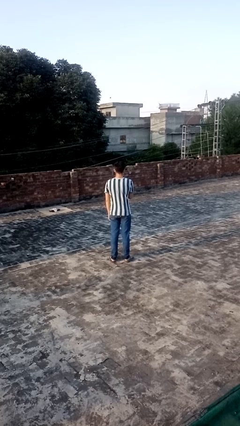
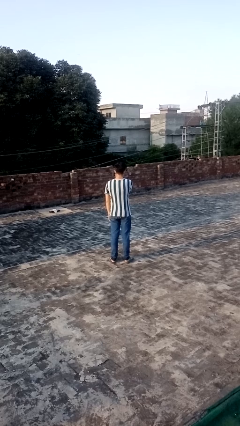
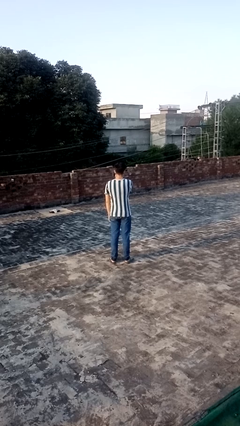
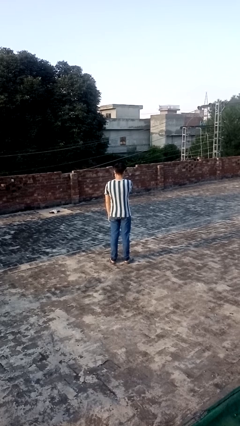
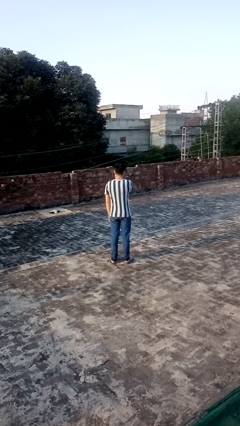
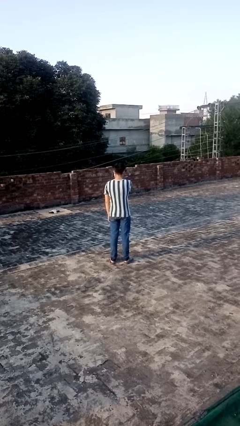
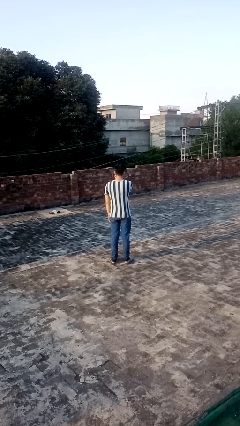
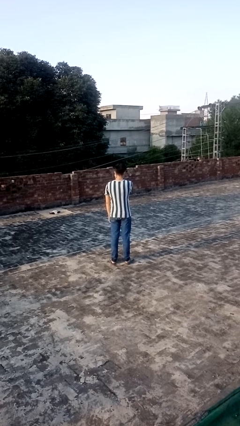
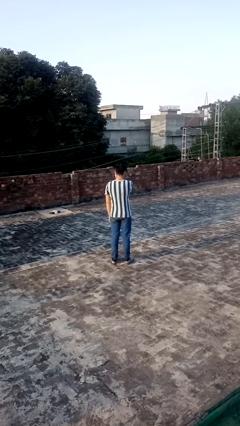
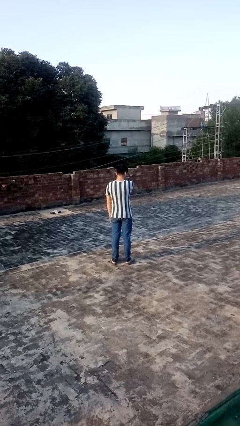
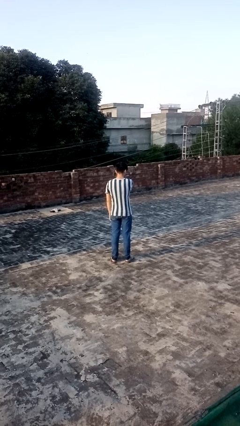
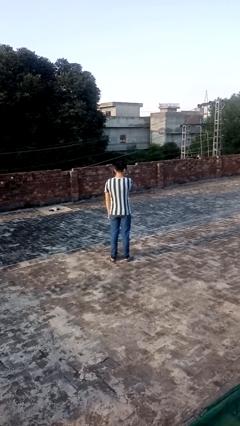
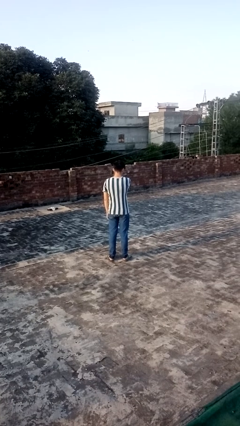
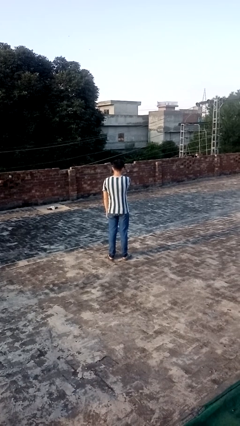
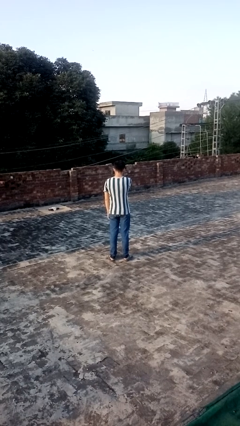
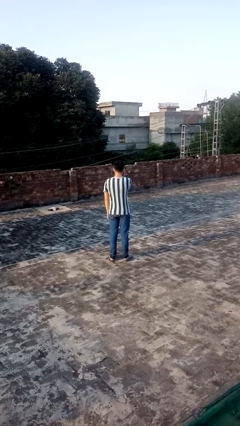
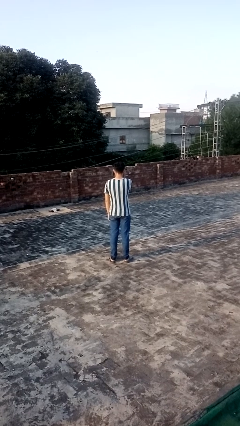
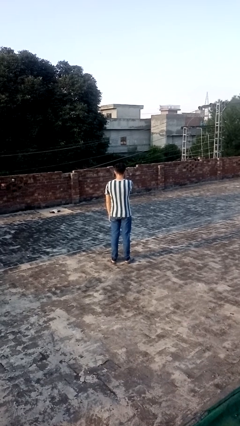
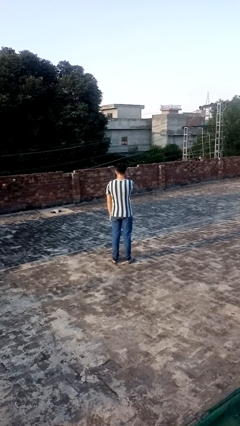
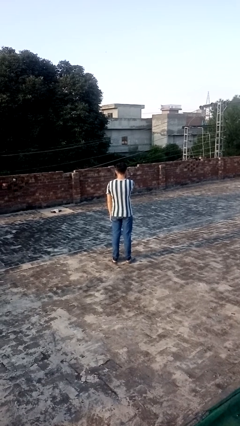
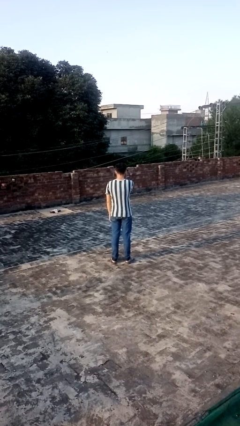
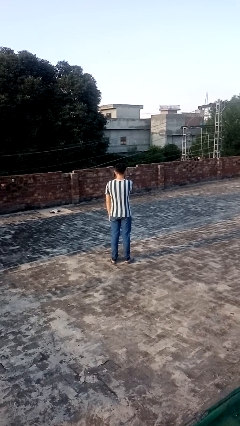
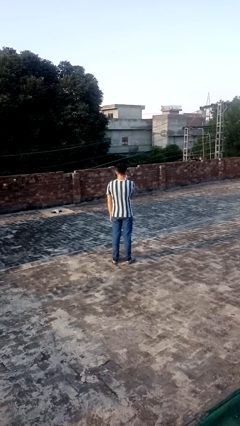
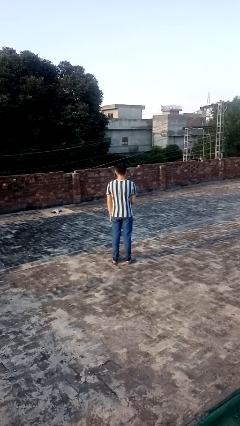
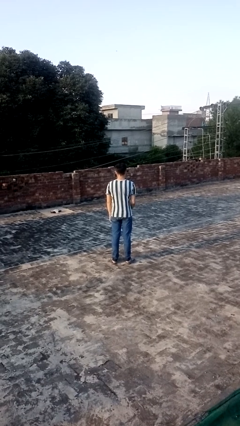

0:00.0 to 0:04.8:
person scratches face

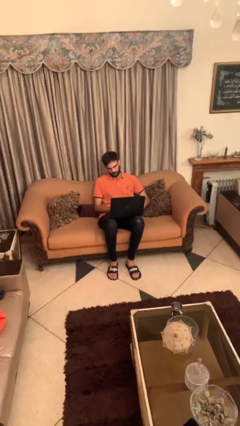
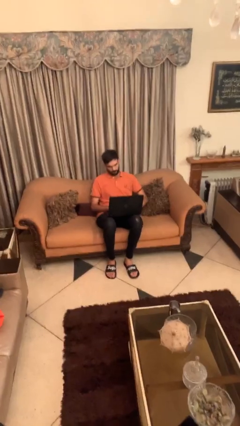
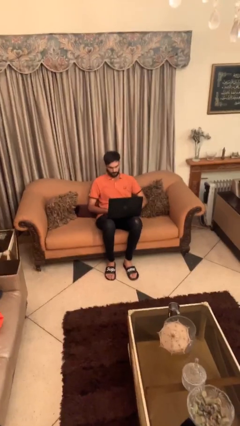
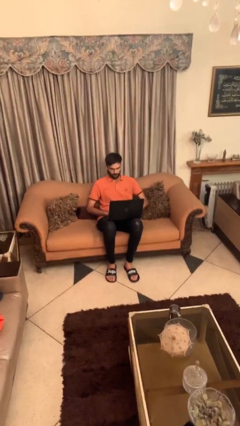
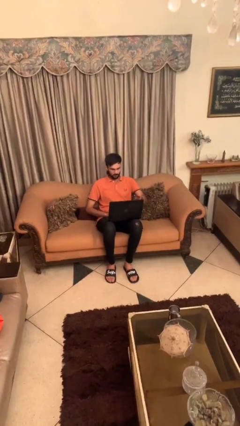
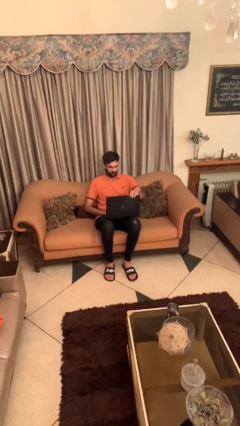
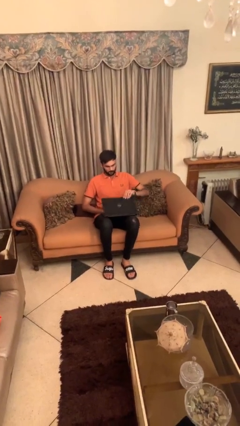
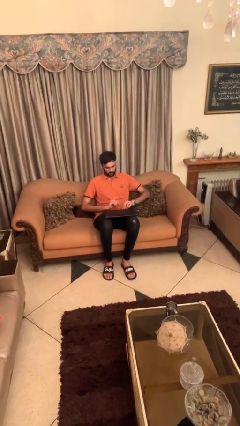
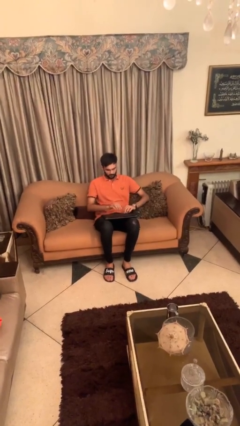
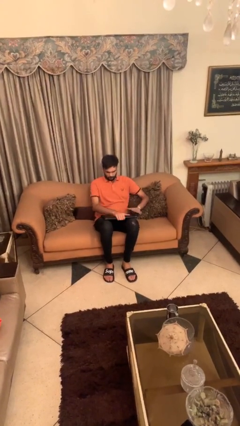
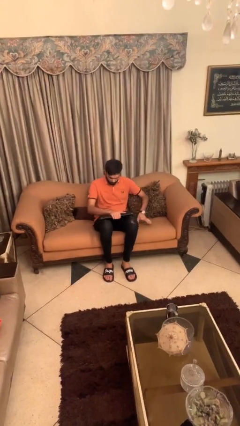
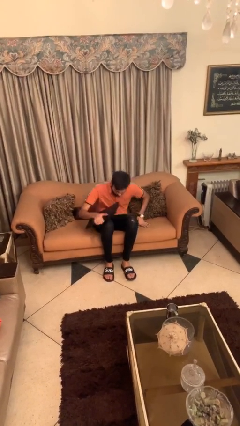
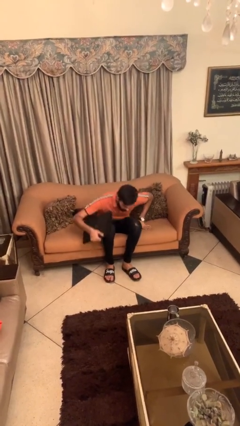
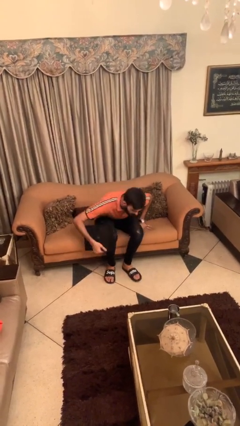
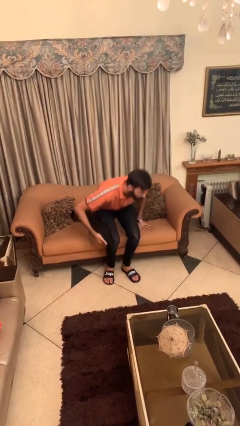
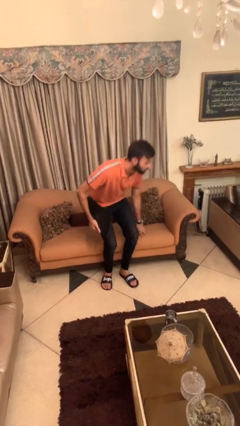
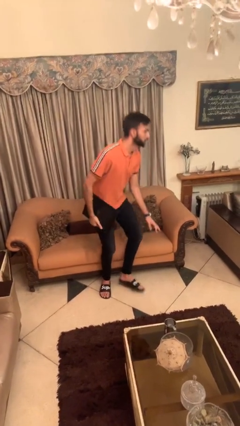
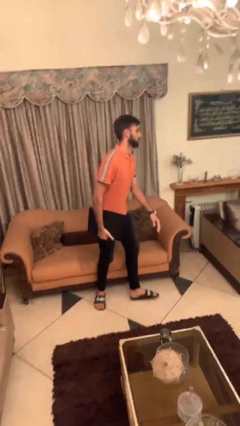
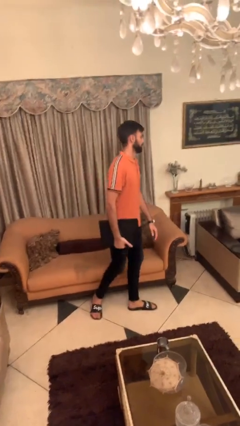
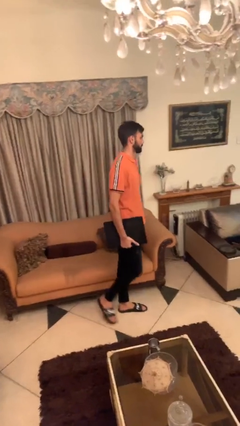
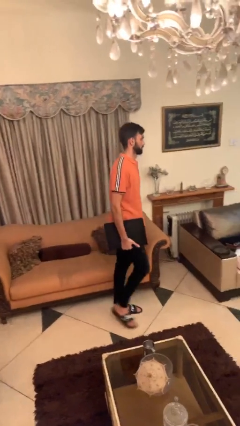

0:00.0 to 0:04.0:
person stands up

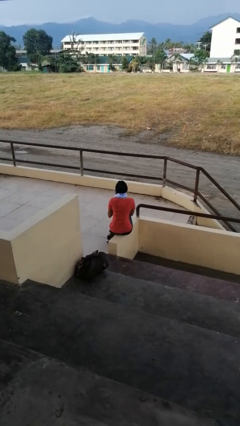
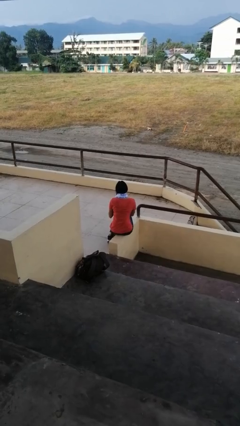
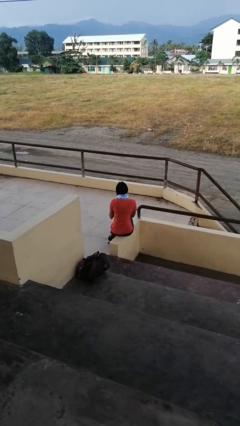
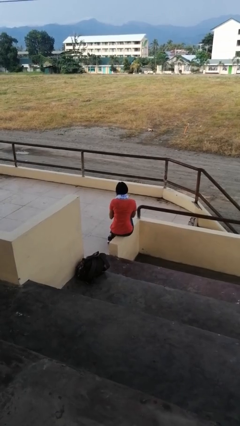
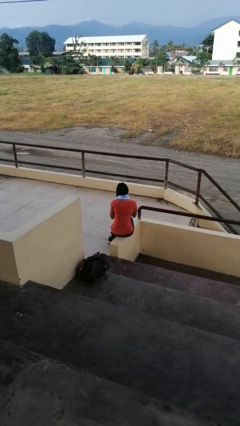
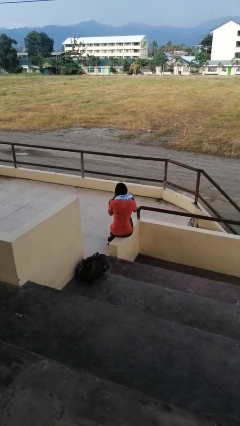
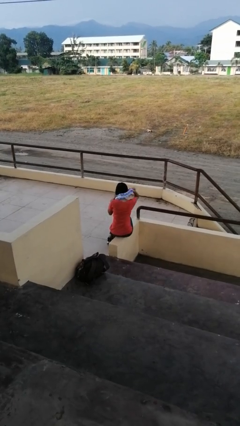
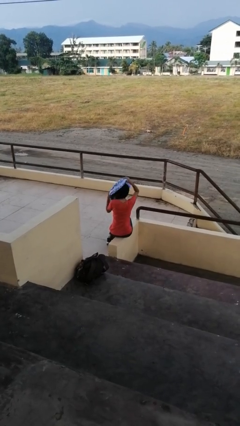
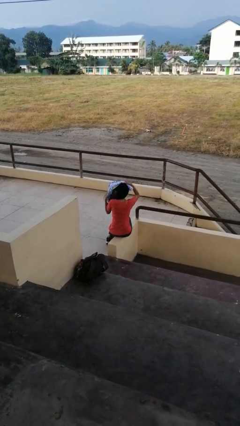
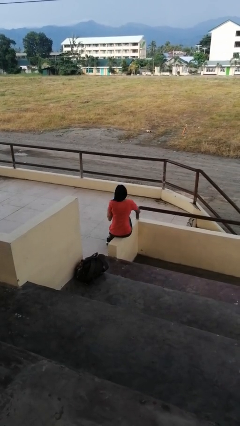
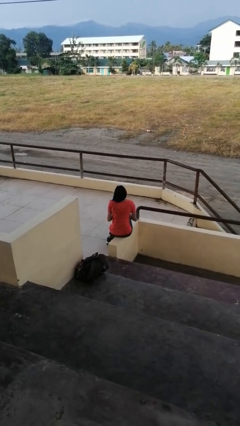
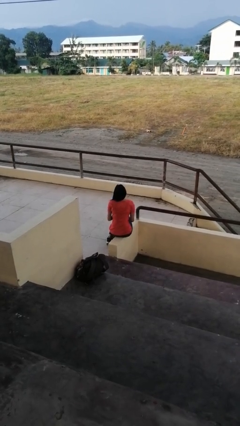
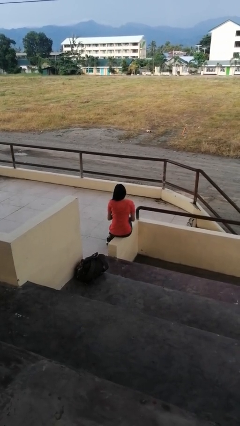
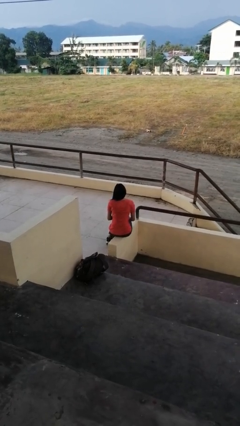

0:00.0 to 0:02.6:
person takes off scarf

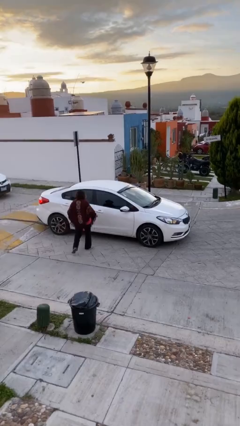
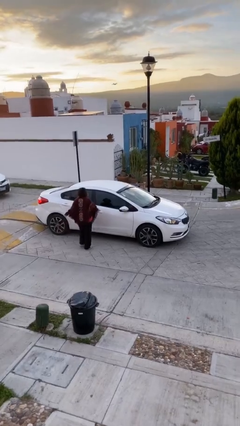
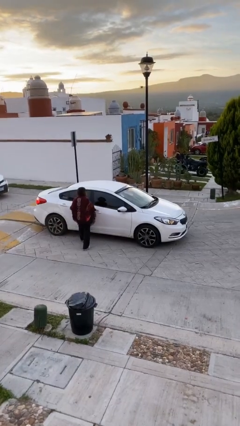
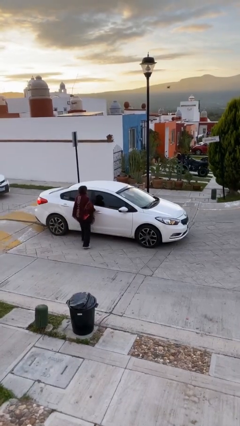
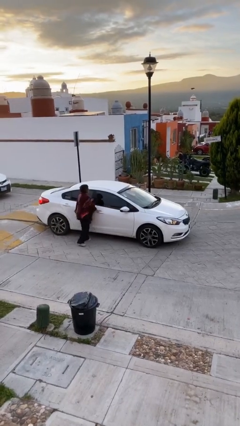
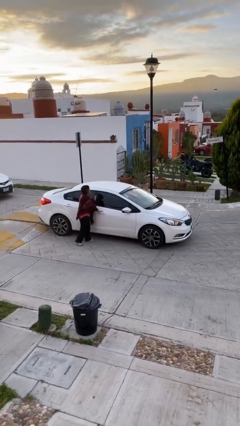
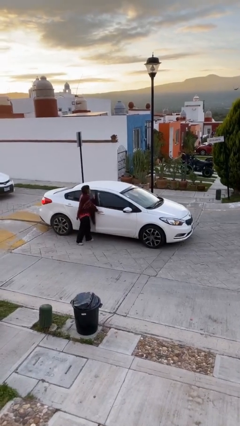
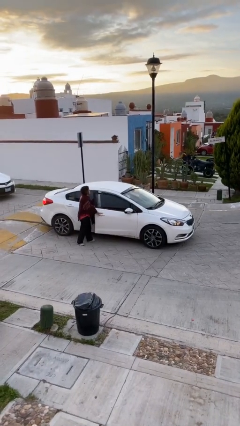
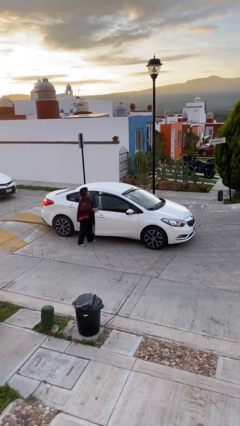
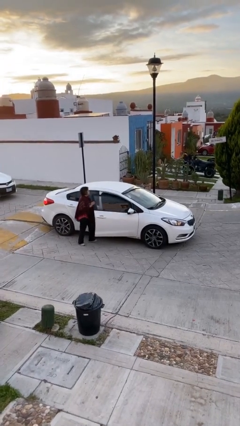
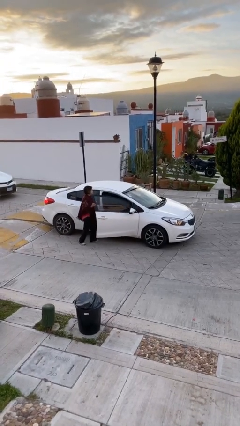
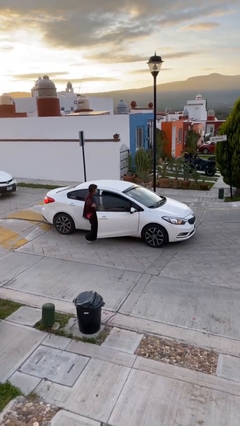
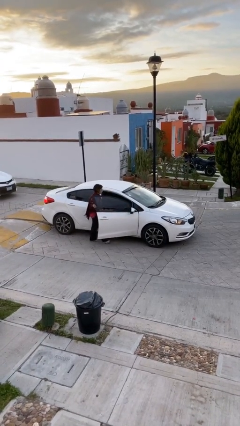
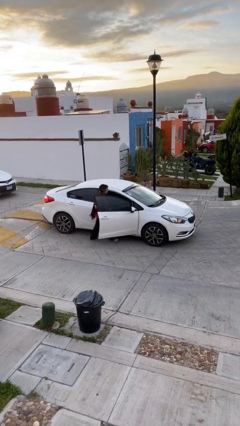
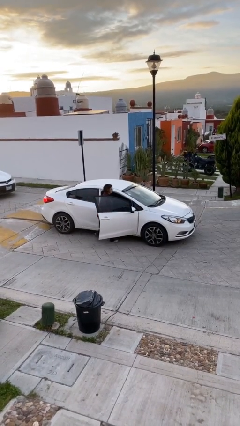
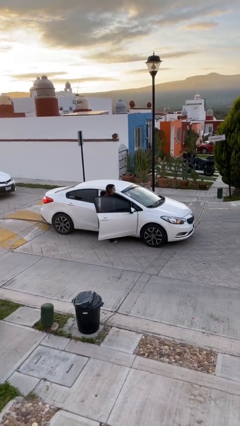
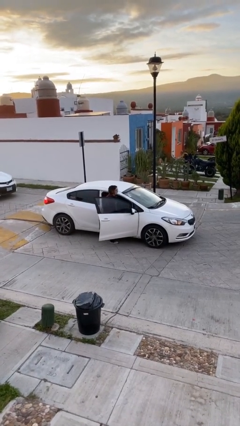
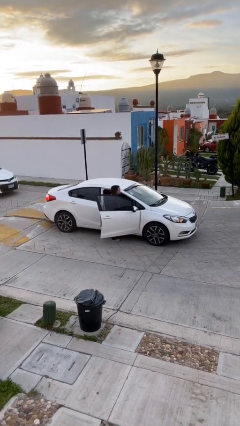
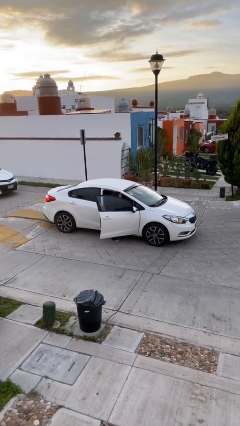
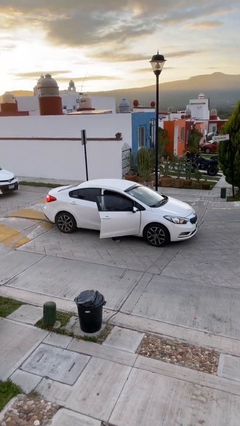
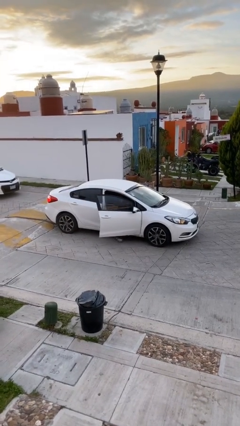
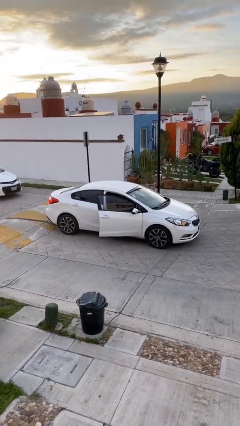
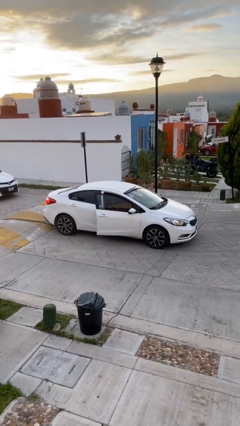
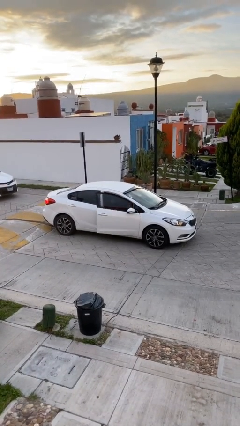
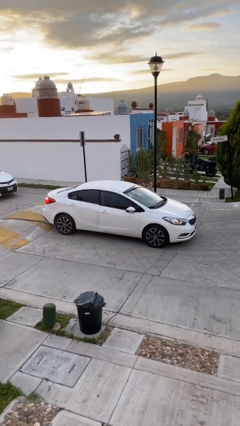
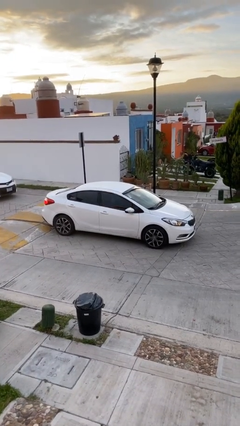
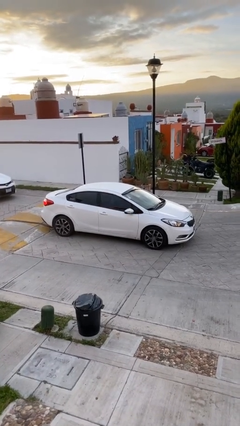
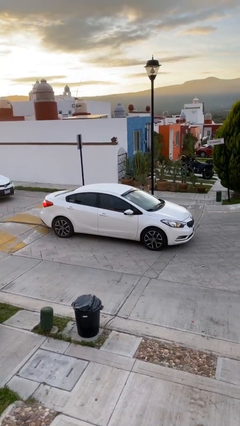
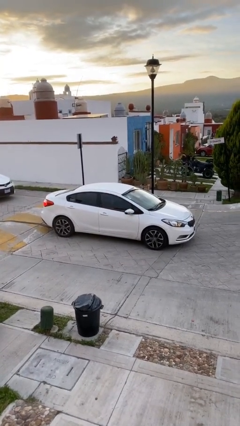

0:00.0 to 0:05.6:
car picks up person

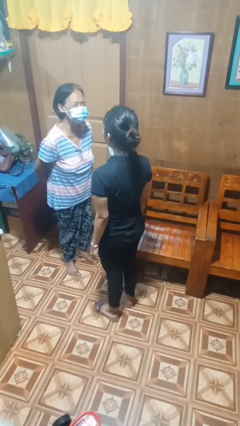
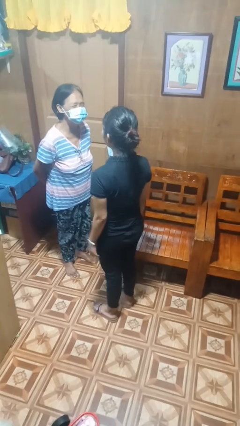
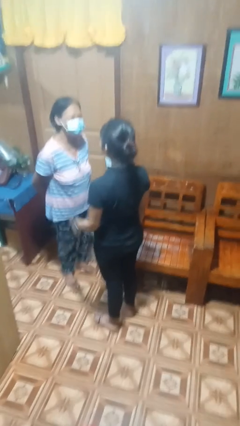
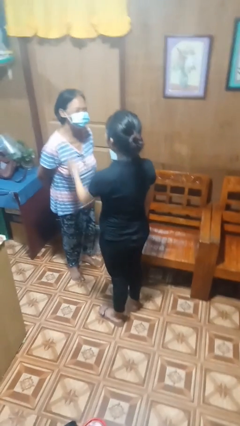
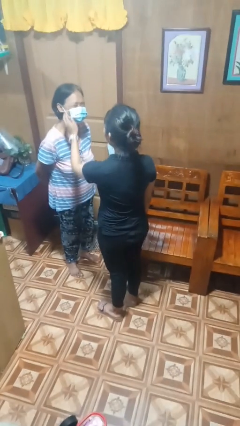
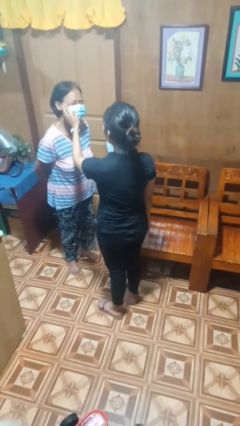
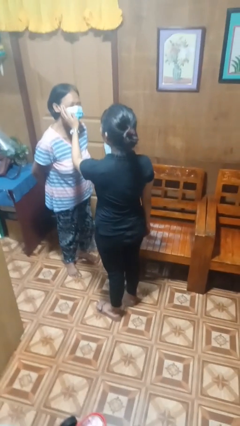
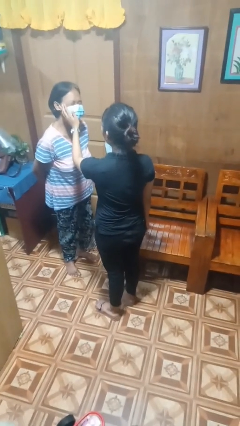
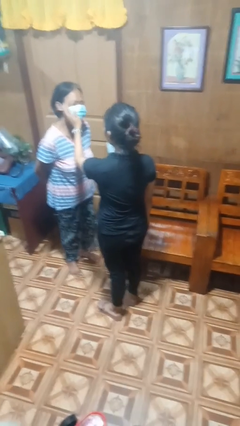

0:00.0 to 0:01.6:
person touches face of person
